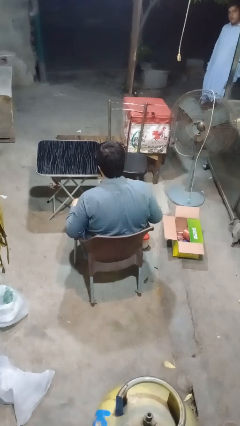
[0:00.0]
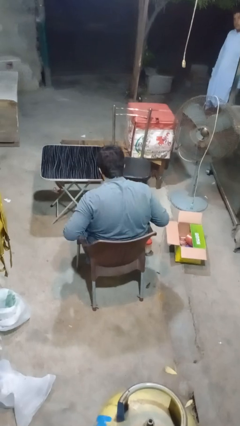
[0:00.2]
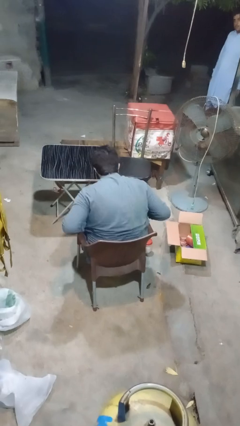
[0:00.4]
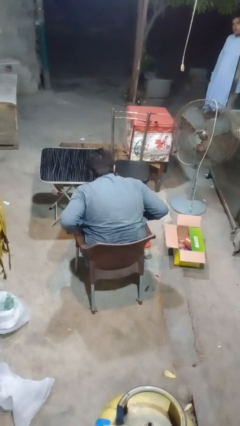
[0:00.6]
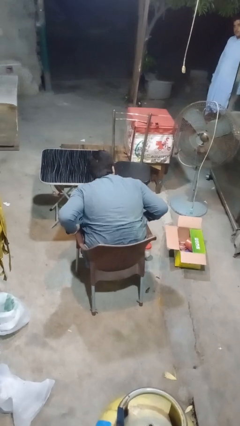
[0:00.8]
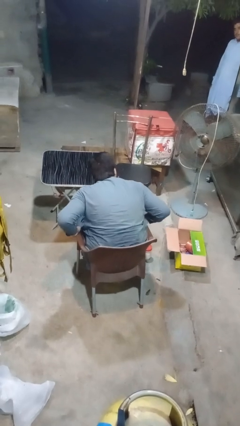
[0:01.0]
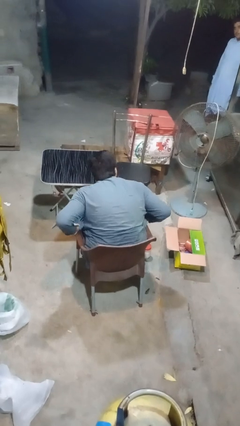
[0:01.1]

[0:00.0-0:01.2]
person picks up object from table

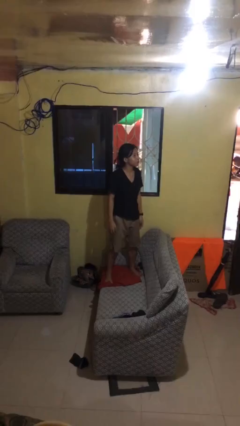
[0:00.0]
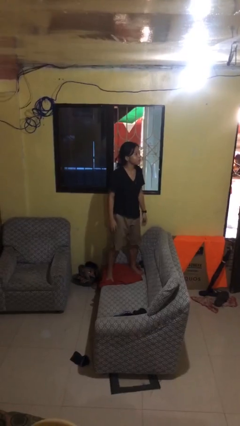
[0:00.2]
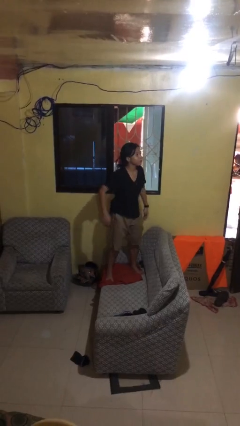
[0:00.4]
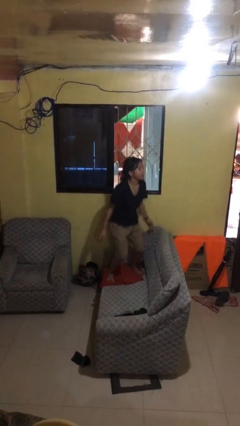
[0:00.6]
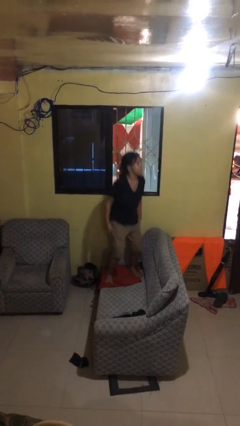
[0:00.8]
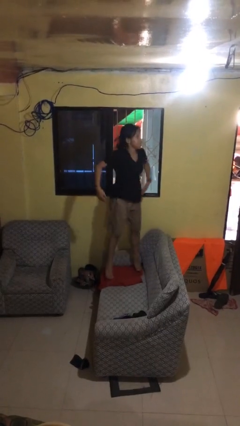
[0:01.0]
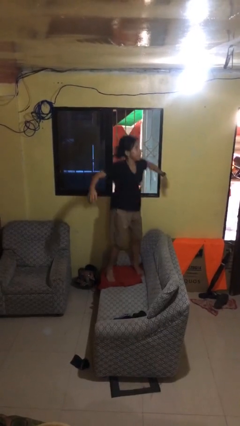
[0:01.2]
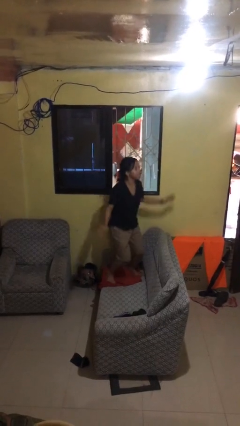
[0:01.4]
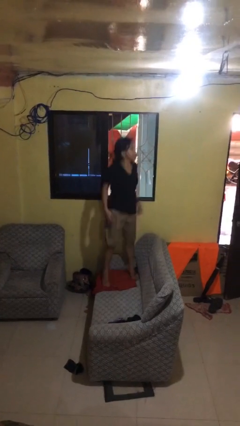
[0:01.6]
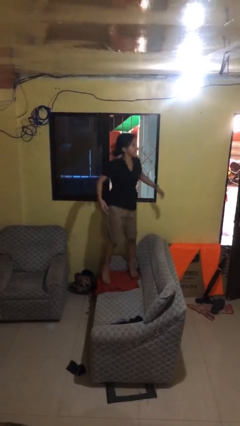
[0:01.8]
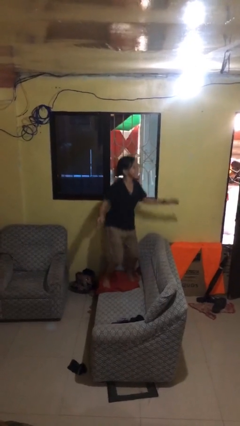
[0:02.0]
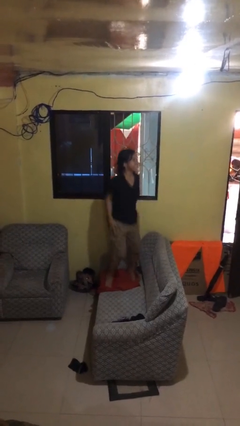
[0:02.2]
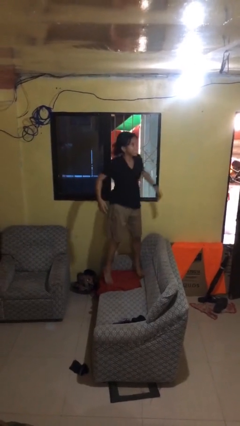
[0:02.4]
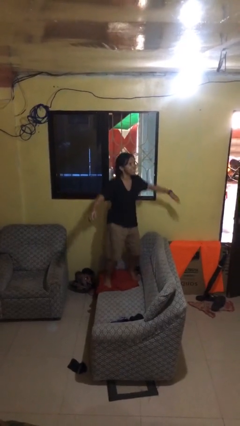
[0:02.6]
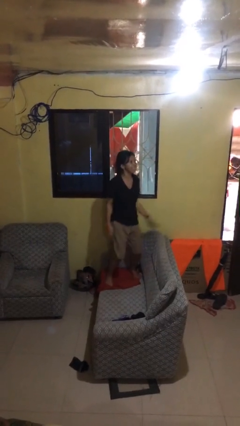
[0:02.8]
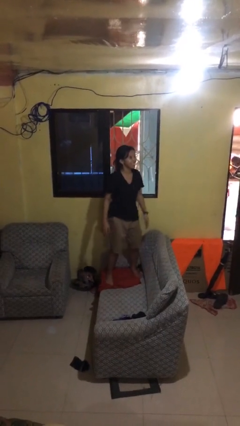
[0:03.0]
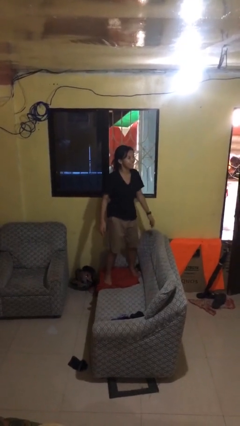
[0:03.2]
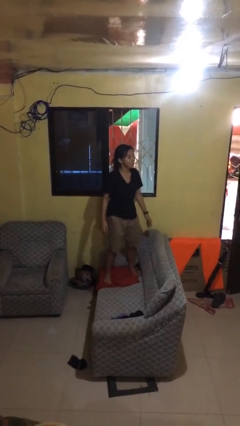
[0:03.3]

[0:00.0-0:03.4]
person jumps on couch

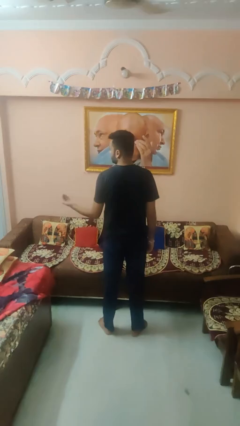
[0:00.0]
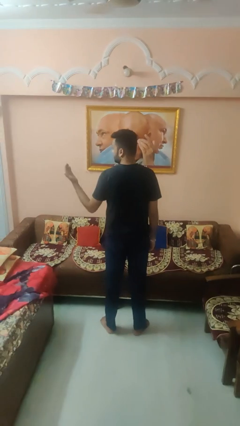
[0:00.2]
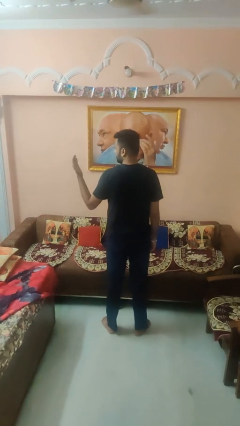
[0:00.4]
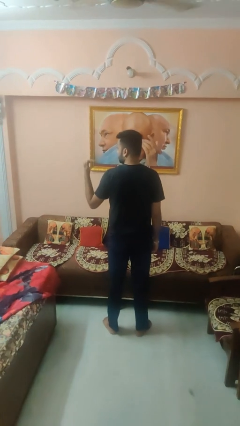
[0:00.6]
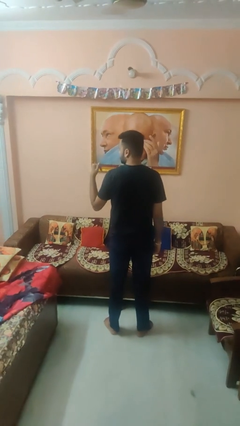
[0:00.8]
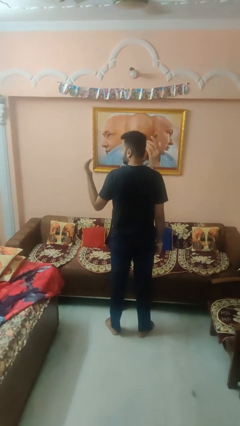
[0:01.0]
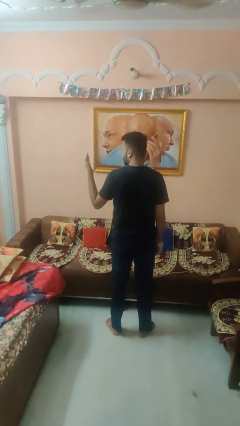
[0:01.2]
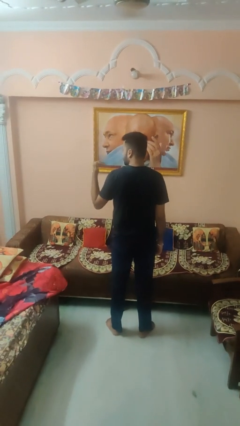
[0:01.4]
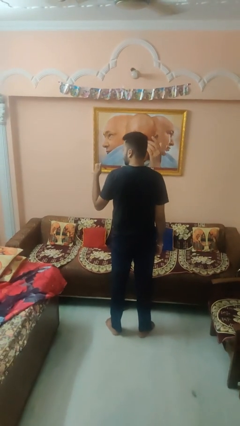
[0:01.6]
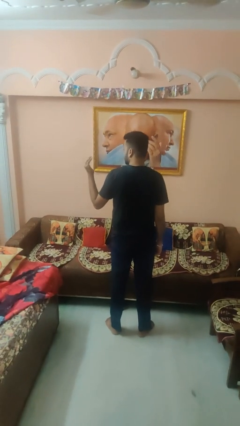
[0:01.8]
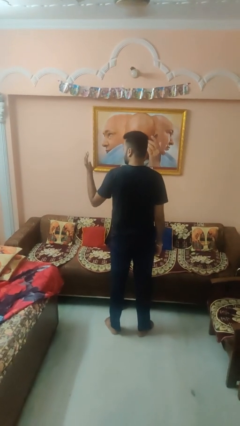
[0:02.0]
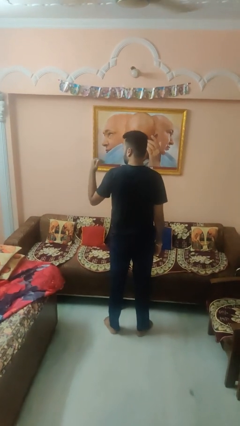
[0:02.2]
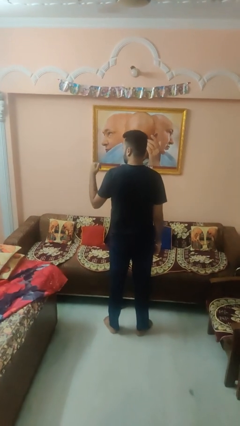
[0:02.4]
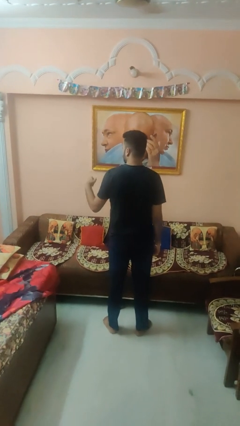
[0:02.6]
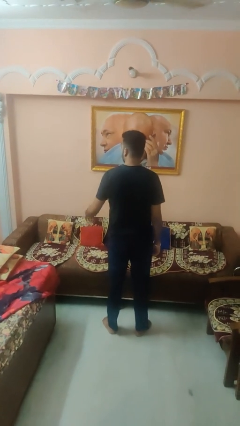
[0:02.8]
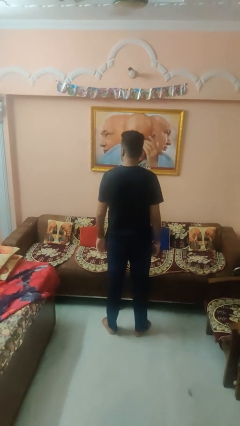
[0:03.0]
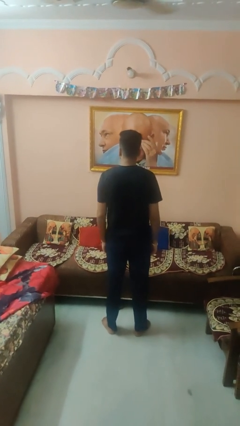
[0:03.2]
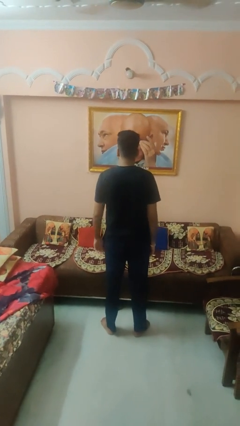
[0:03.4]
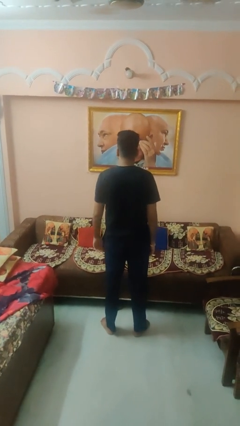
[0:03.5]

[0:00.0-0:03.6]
person gestures come here

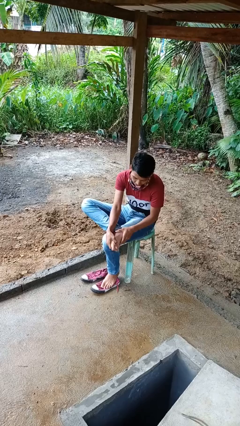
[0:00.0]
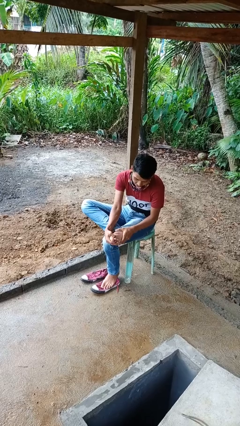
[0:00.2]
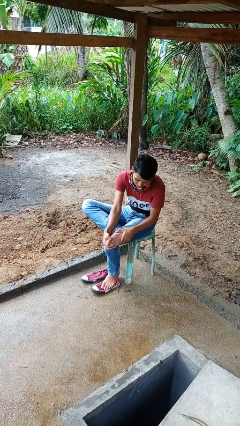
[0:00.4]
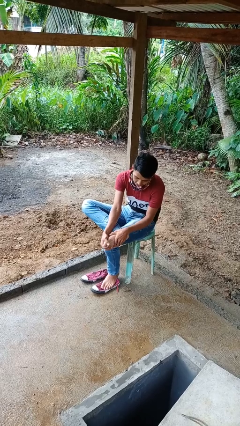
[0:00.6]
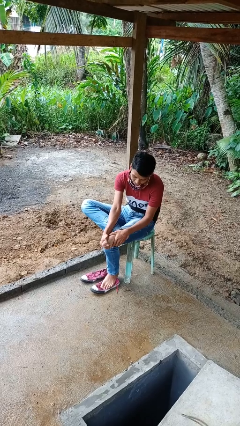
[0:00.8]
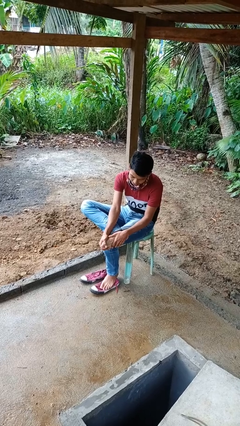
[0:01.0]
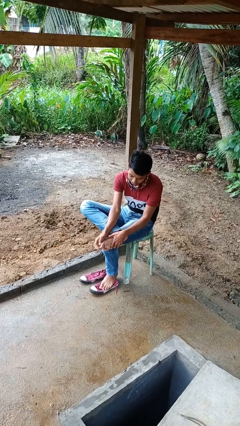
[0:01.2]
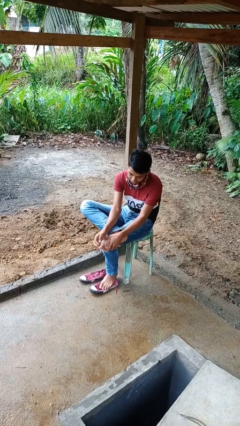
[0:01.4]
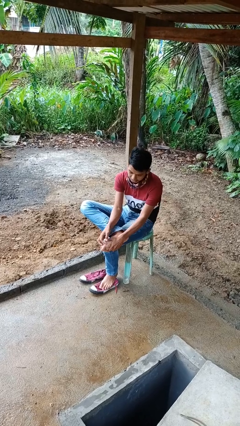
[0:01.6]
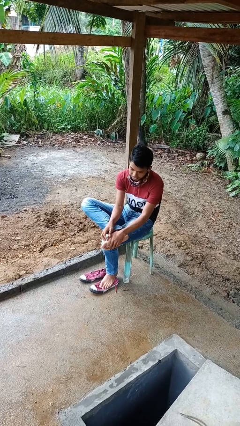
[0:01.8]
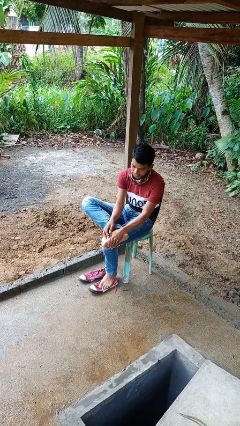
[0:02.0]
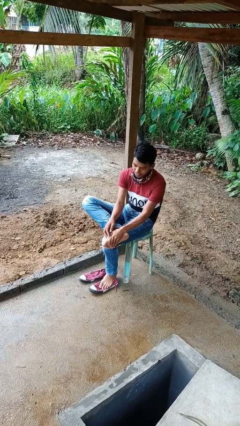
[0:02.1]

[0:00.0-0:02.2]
person rubs foot

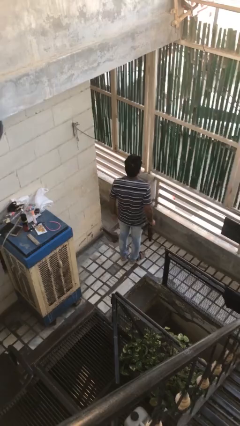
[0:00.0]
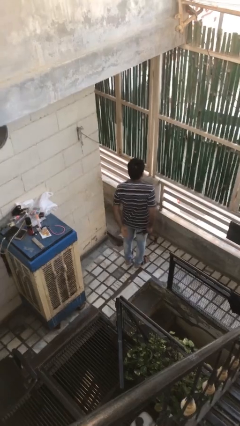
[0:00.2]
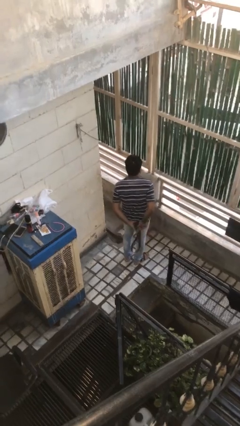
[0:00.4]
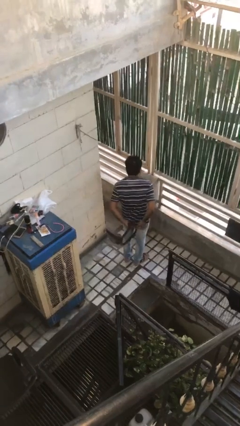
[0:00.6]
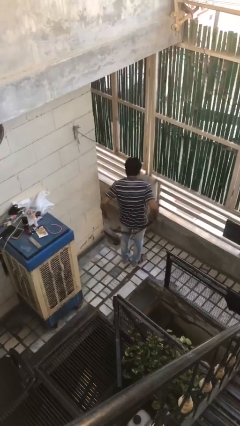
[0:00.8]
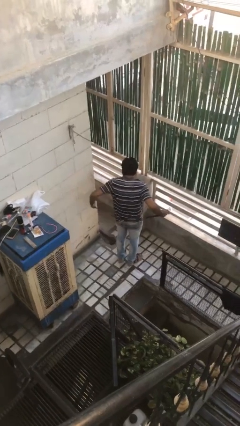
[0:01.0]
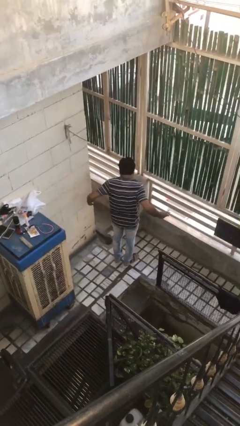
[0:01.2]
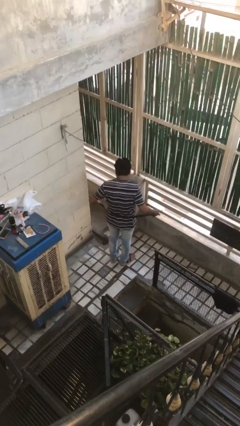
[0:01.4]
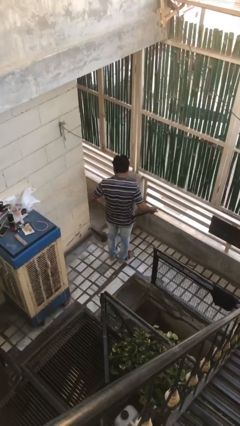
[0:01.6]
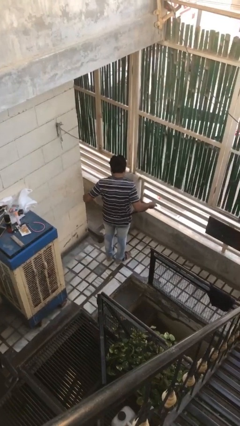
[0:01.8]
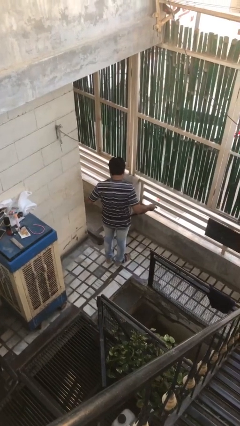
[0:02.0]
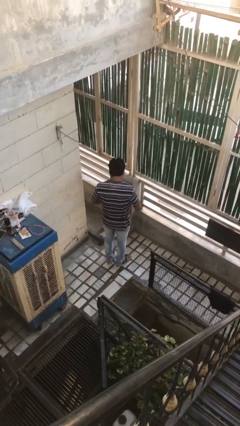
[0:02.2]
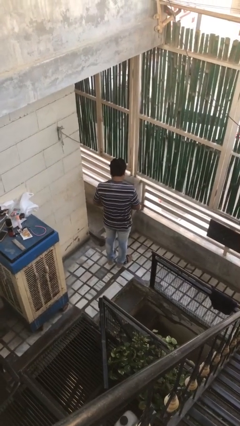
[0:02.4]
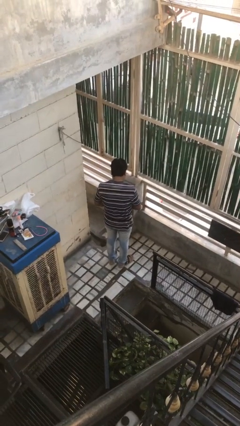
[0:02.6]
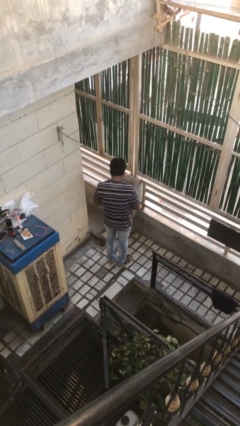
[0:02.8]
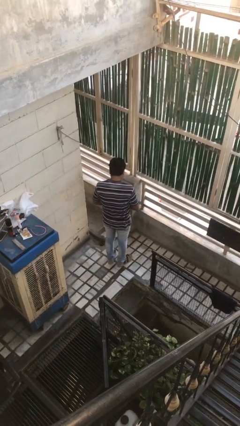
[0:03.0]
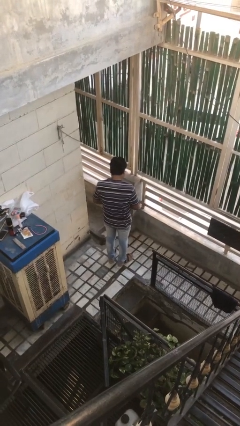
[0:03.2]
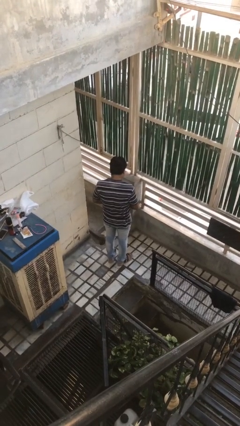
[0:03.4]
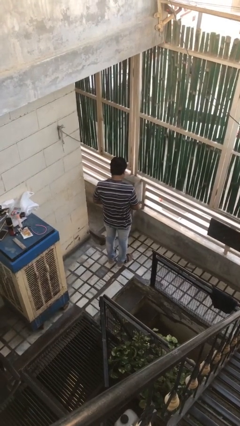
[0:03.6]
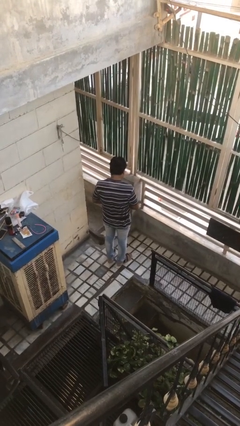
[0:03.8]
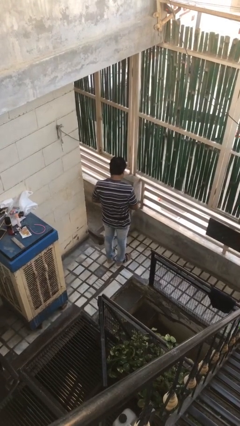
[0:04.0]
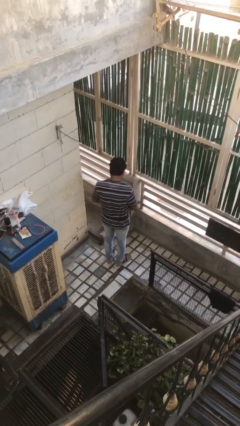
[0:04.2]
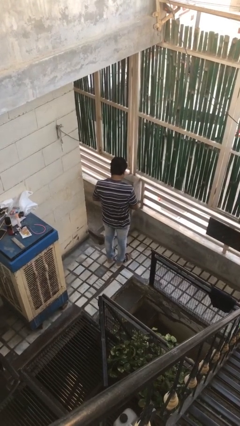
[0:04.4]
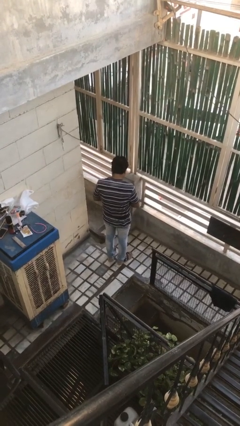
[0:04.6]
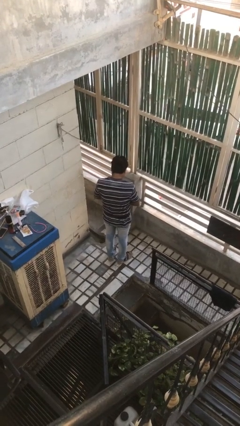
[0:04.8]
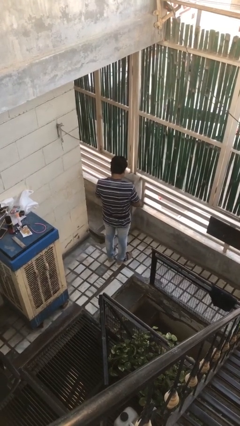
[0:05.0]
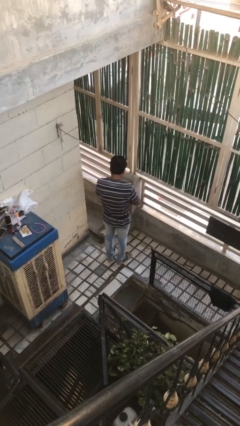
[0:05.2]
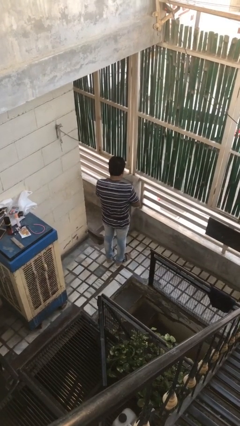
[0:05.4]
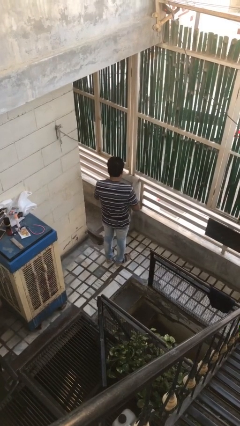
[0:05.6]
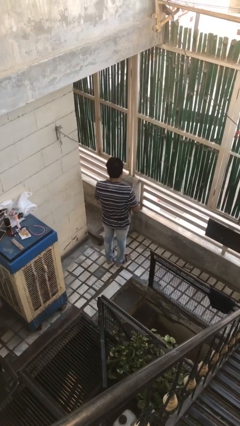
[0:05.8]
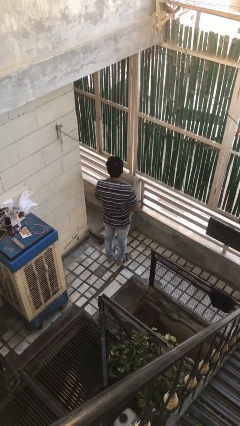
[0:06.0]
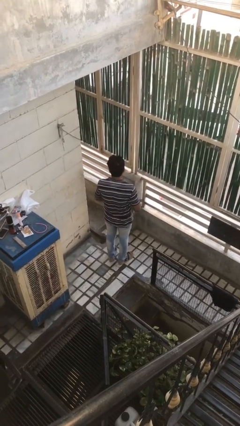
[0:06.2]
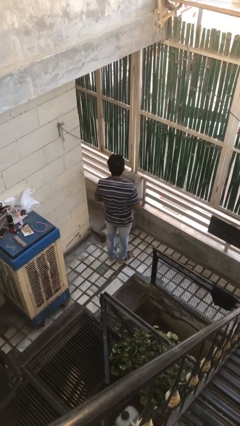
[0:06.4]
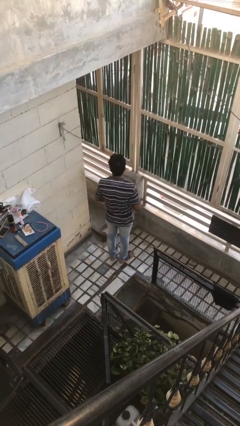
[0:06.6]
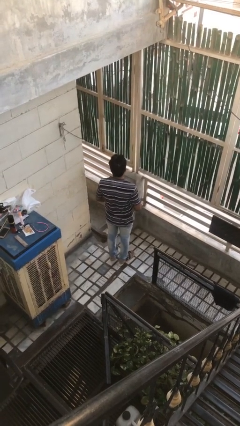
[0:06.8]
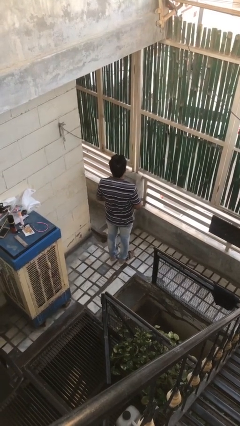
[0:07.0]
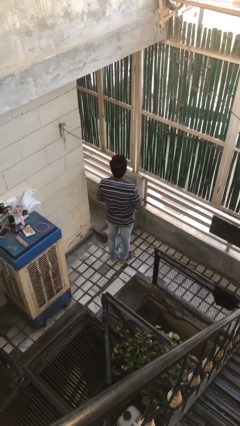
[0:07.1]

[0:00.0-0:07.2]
person puts on belt
